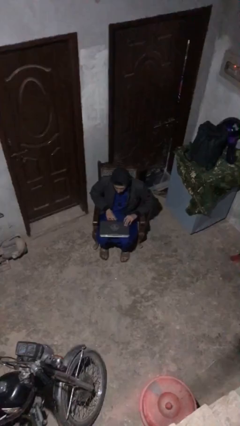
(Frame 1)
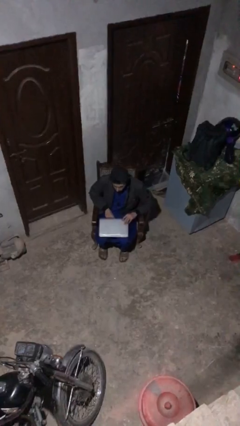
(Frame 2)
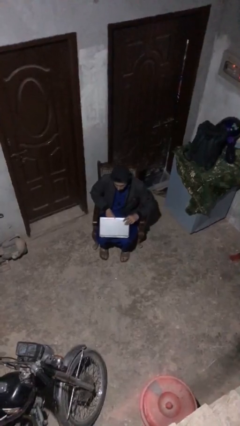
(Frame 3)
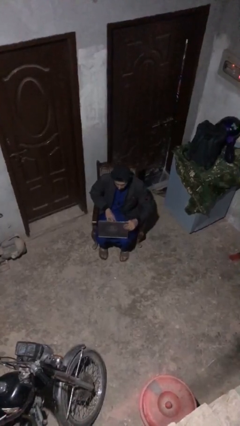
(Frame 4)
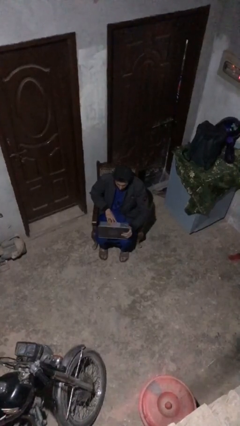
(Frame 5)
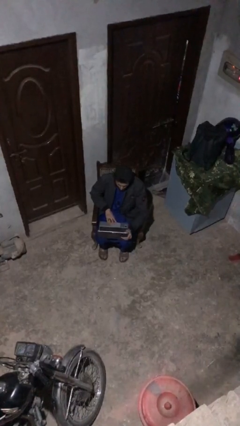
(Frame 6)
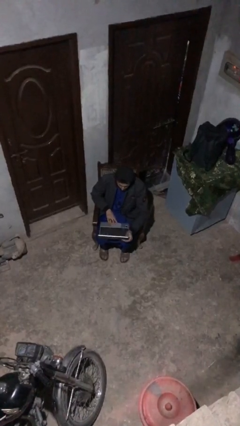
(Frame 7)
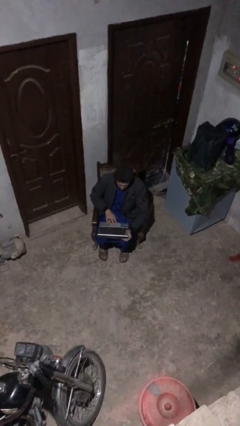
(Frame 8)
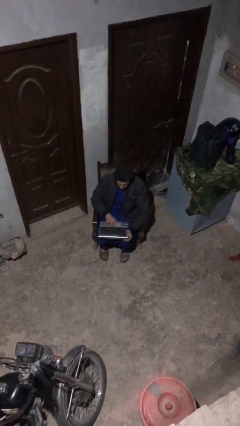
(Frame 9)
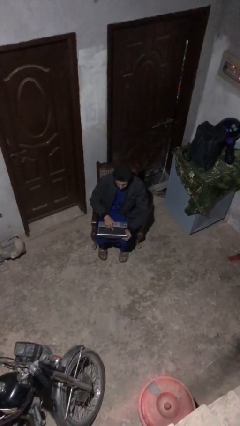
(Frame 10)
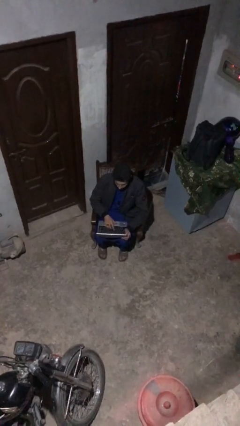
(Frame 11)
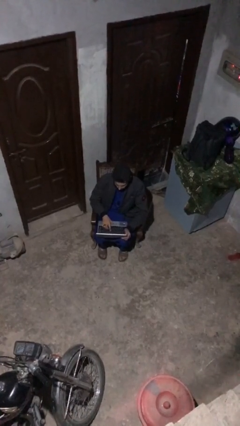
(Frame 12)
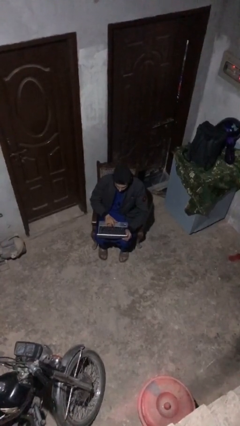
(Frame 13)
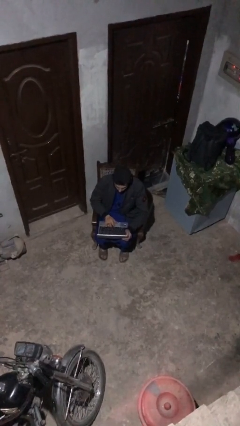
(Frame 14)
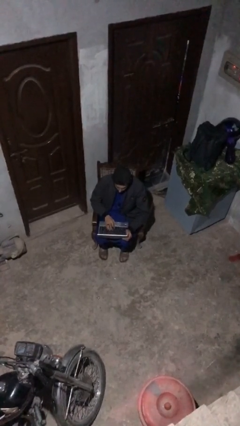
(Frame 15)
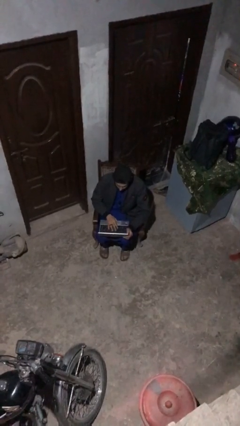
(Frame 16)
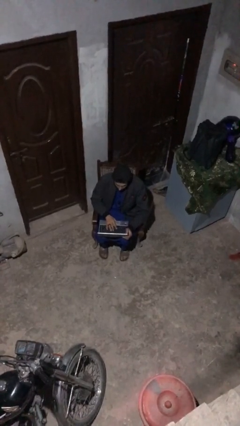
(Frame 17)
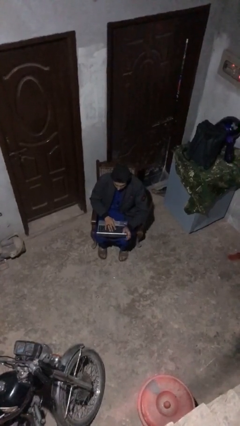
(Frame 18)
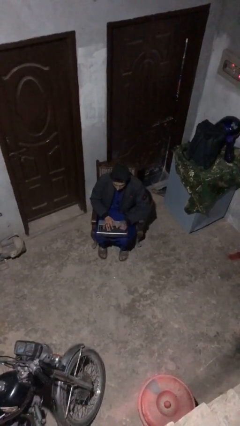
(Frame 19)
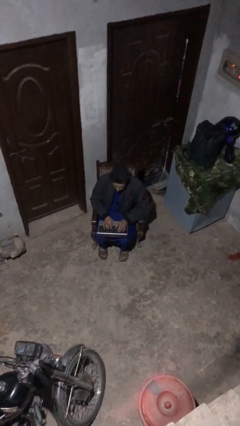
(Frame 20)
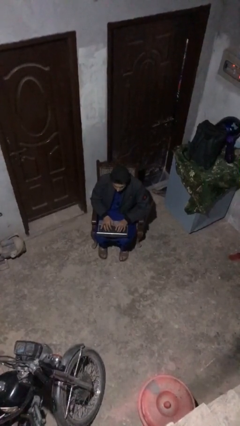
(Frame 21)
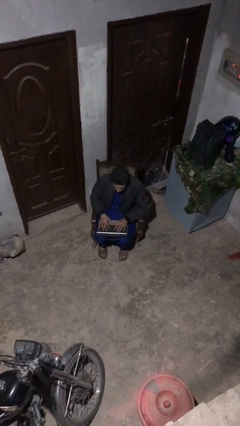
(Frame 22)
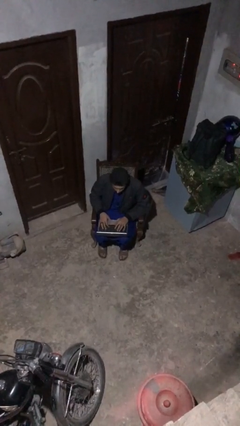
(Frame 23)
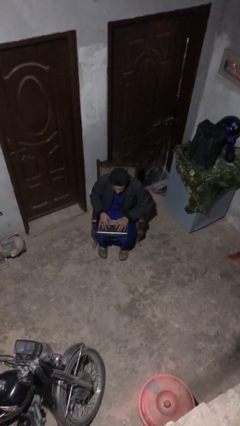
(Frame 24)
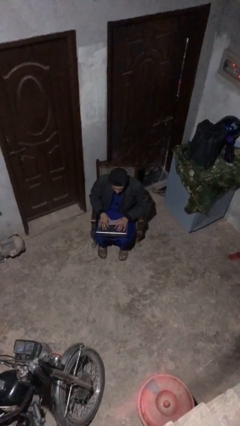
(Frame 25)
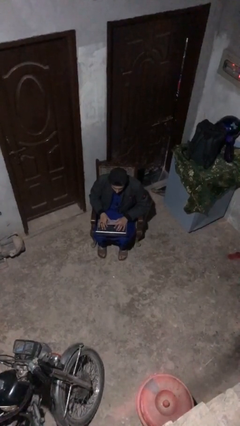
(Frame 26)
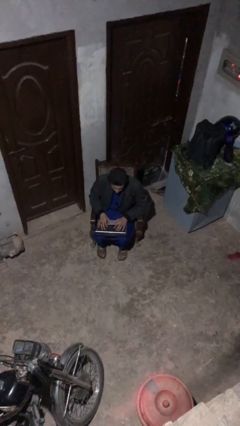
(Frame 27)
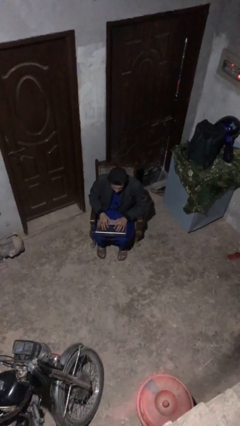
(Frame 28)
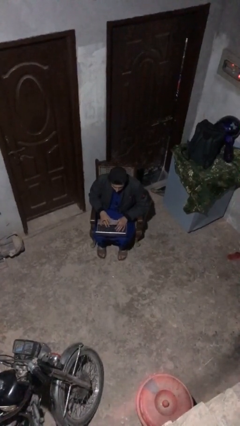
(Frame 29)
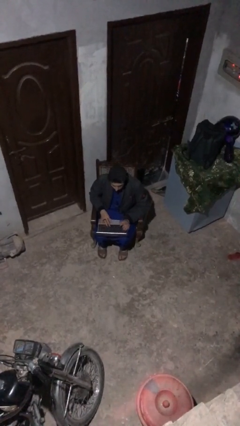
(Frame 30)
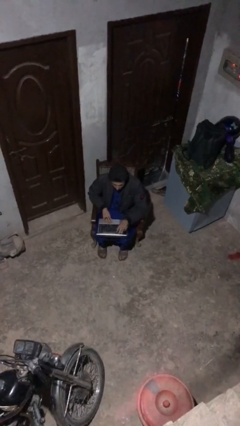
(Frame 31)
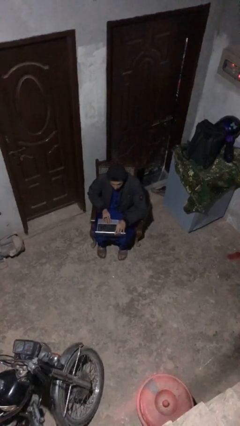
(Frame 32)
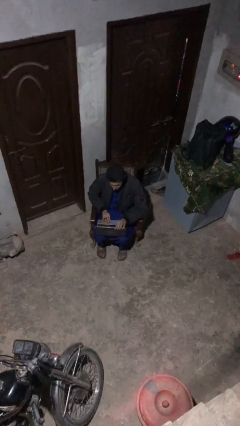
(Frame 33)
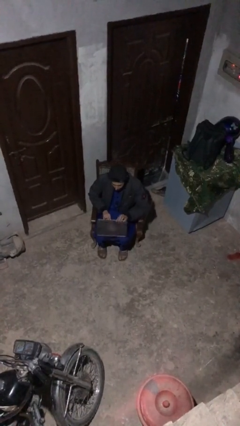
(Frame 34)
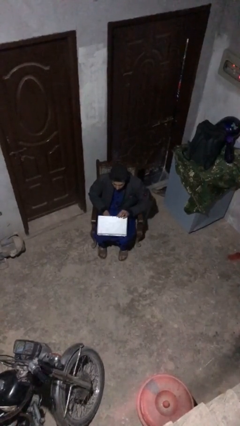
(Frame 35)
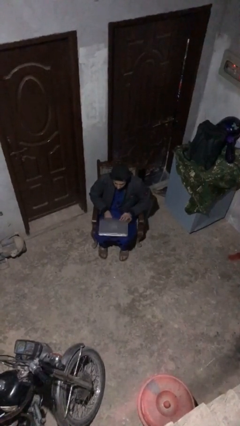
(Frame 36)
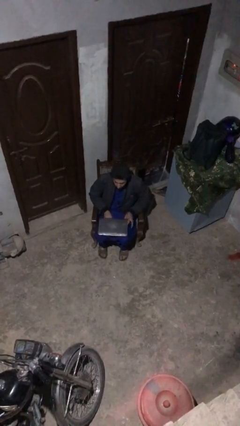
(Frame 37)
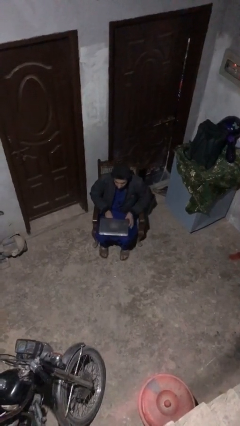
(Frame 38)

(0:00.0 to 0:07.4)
person interacts with laptop

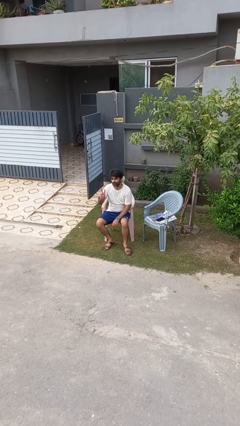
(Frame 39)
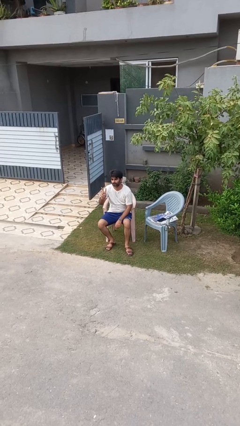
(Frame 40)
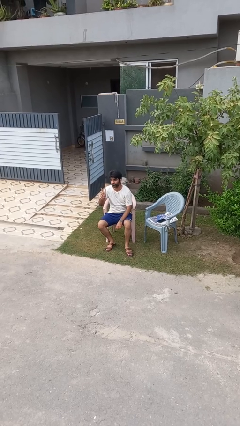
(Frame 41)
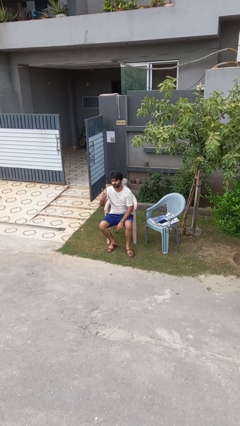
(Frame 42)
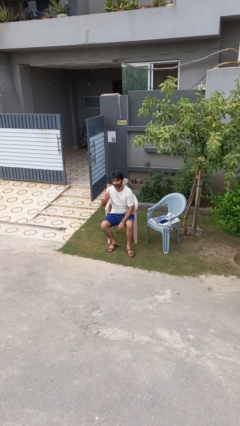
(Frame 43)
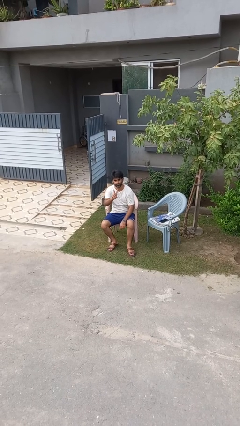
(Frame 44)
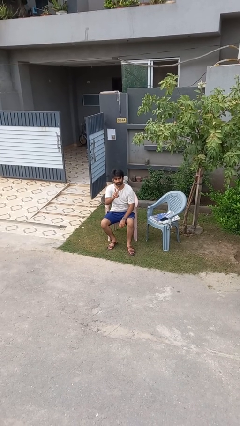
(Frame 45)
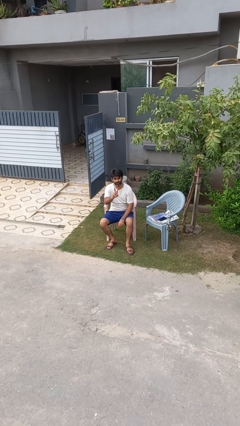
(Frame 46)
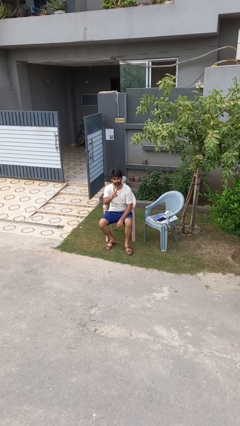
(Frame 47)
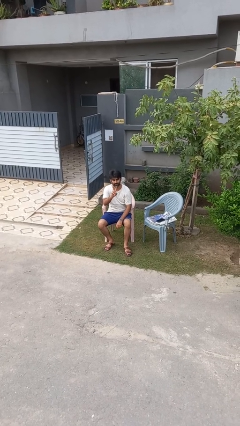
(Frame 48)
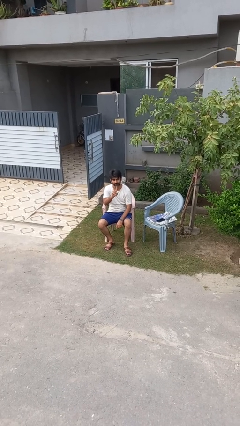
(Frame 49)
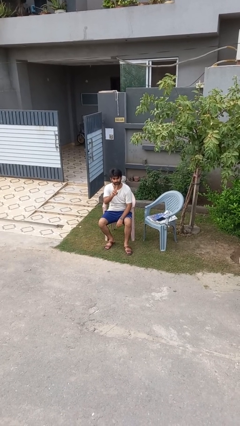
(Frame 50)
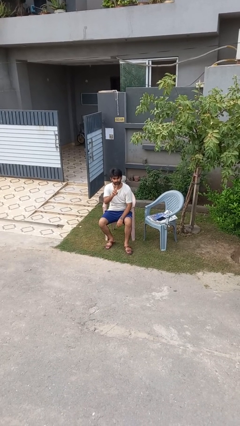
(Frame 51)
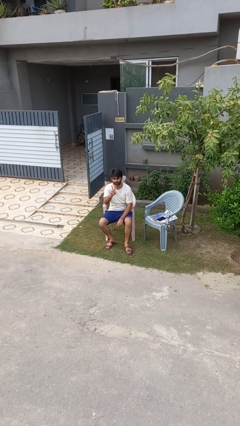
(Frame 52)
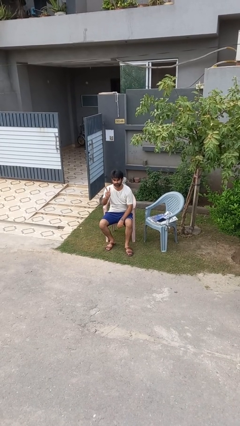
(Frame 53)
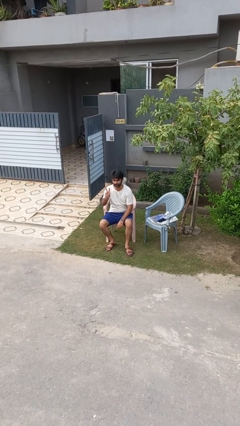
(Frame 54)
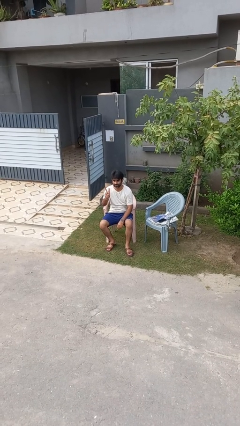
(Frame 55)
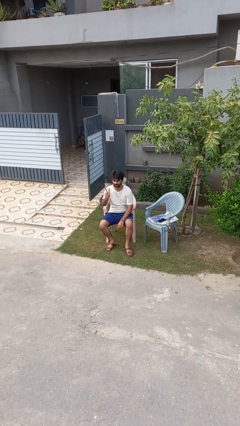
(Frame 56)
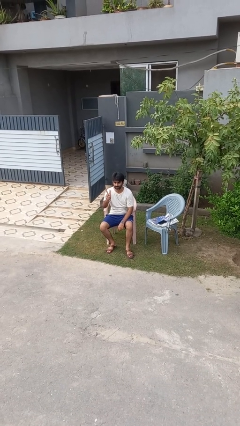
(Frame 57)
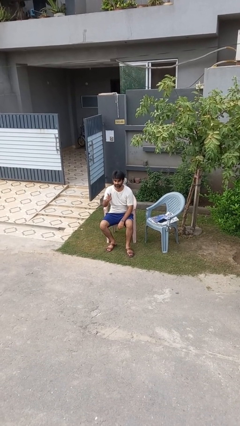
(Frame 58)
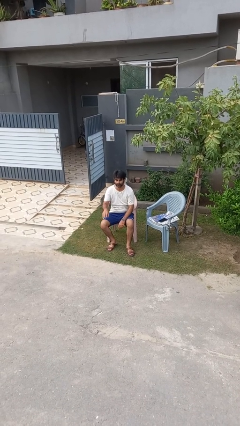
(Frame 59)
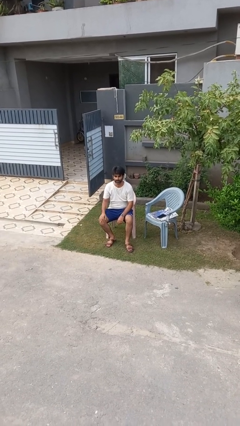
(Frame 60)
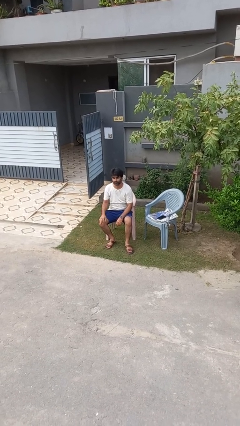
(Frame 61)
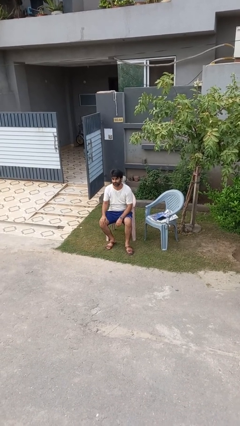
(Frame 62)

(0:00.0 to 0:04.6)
person gestures peace

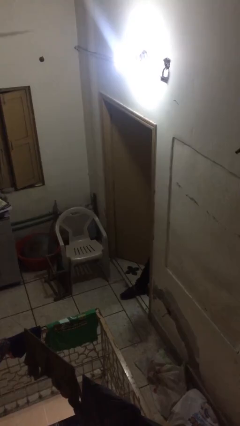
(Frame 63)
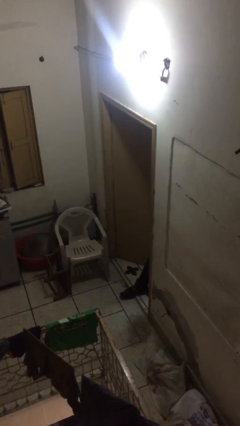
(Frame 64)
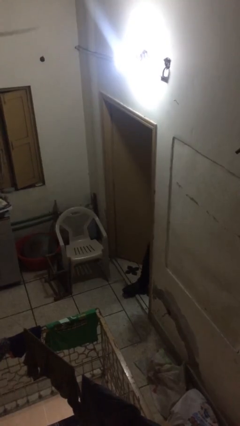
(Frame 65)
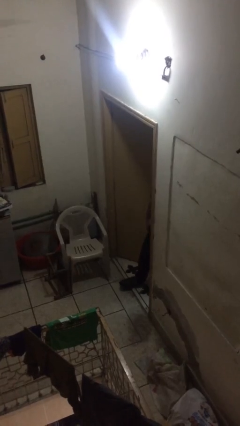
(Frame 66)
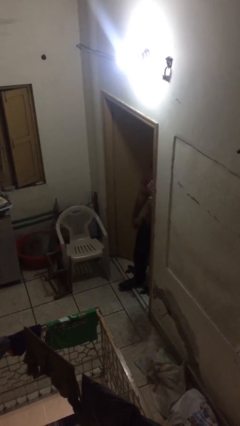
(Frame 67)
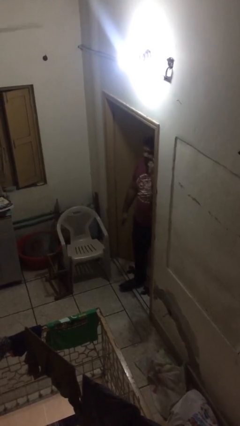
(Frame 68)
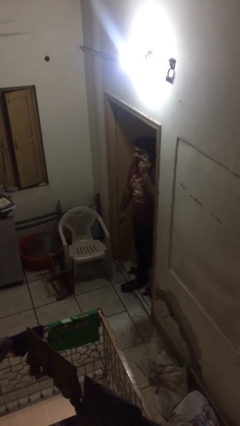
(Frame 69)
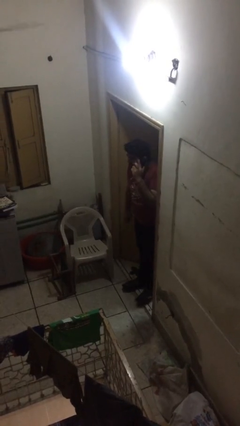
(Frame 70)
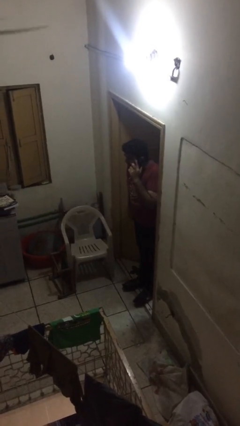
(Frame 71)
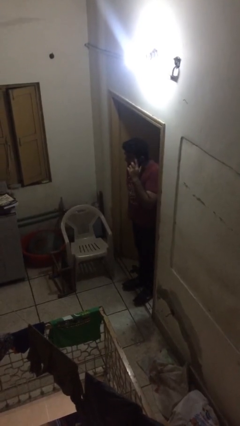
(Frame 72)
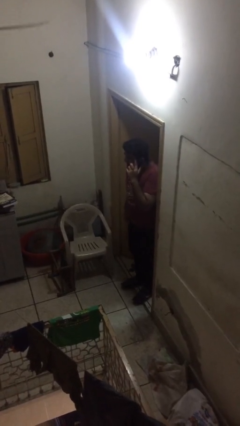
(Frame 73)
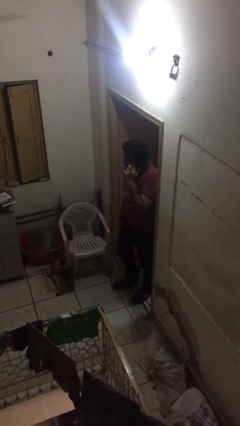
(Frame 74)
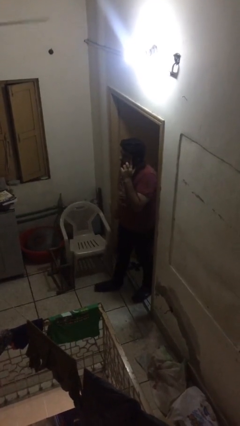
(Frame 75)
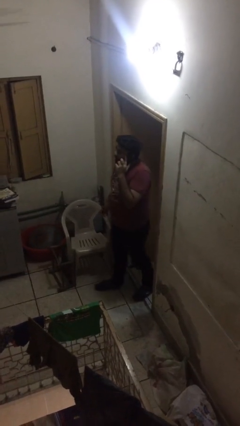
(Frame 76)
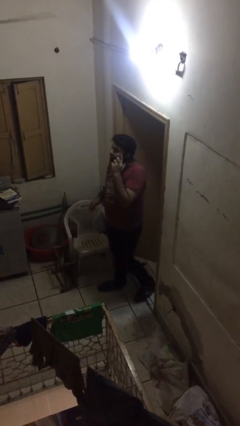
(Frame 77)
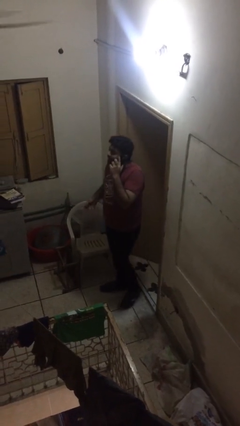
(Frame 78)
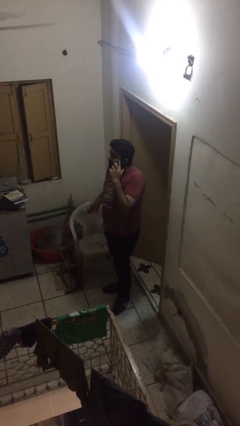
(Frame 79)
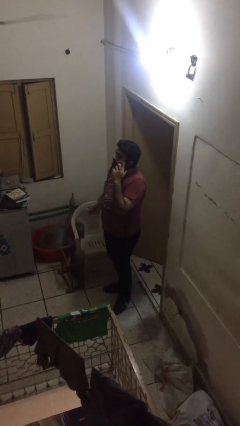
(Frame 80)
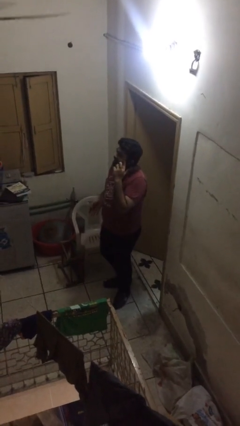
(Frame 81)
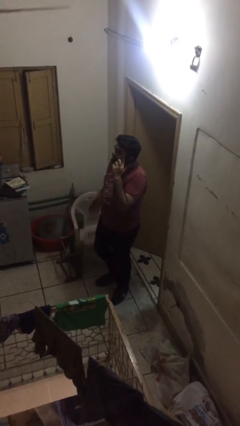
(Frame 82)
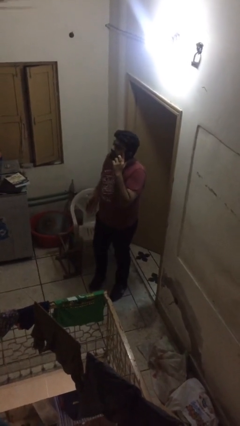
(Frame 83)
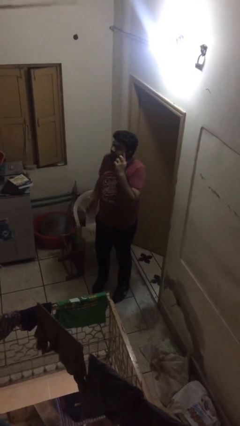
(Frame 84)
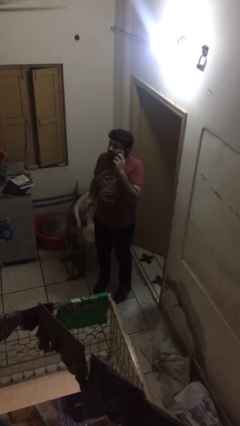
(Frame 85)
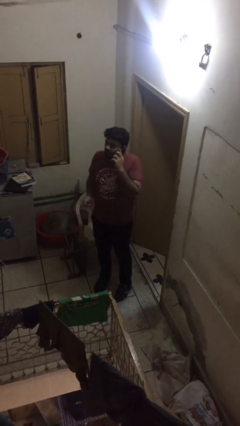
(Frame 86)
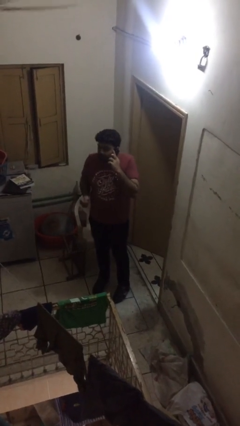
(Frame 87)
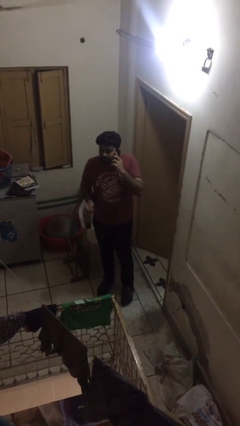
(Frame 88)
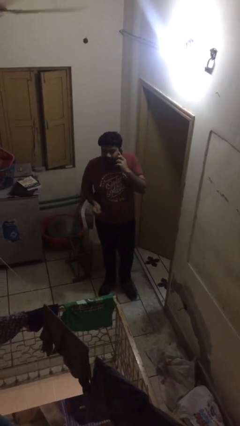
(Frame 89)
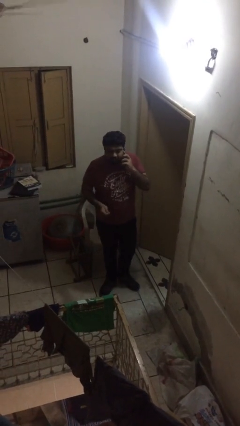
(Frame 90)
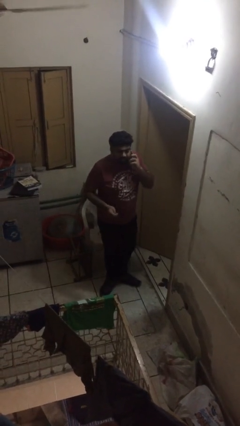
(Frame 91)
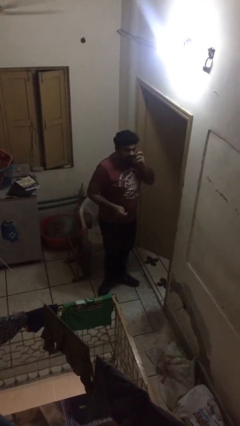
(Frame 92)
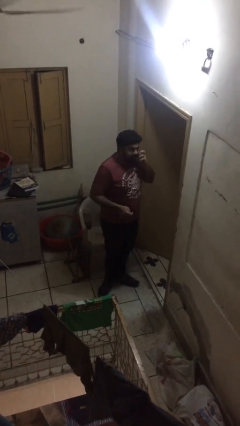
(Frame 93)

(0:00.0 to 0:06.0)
person enters scene through structure
